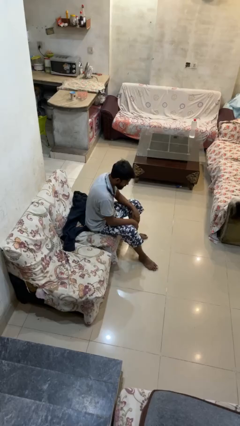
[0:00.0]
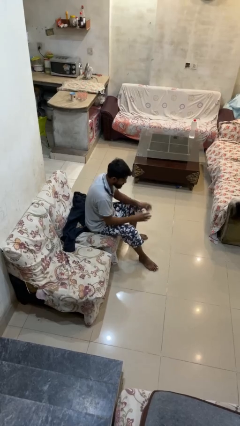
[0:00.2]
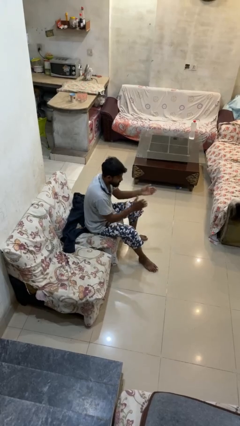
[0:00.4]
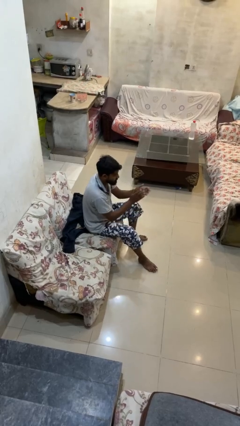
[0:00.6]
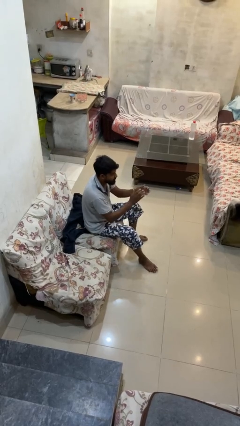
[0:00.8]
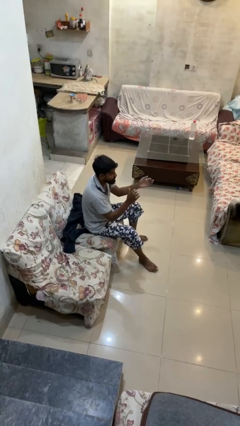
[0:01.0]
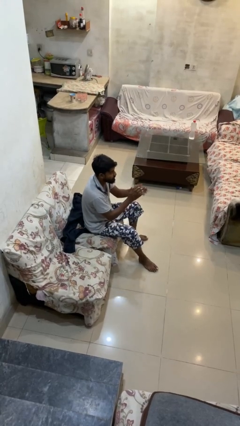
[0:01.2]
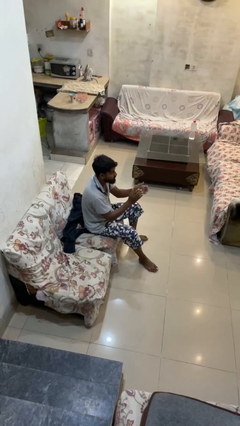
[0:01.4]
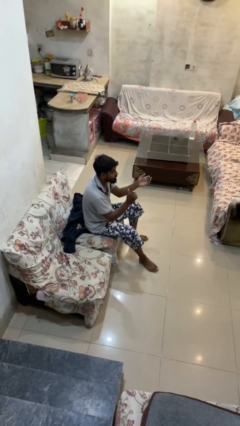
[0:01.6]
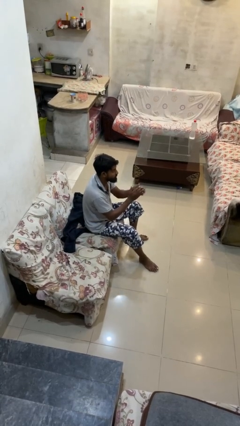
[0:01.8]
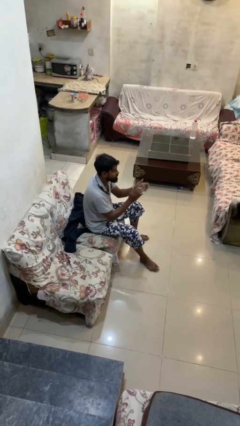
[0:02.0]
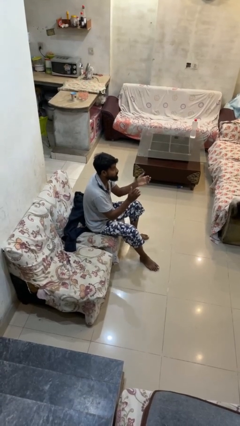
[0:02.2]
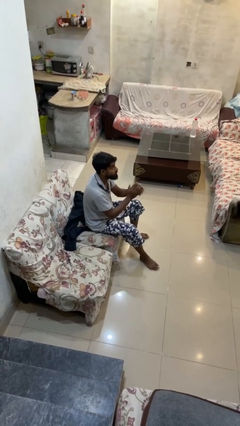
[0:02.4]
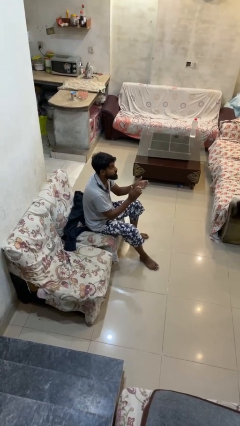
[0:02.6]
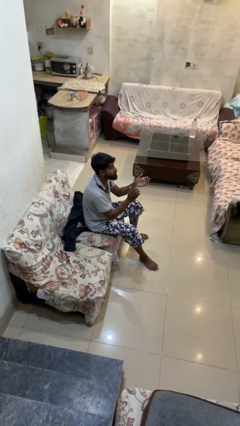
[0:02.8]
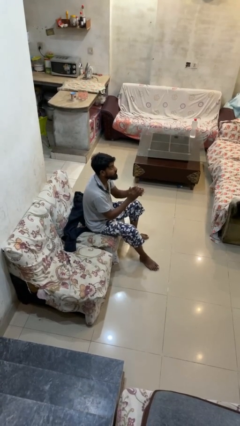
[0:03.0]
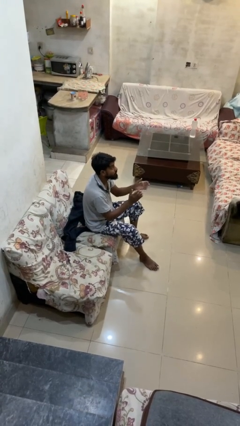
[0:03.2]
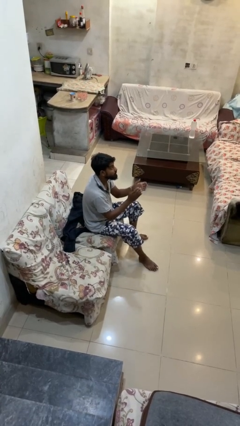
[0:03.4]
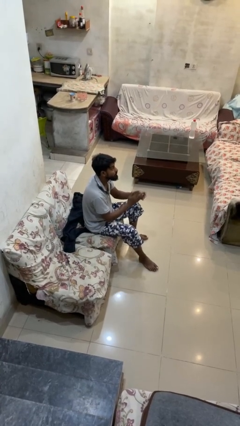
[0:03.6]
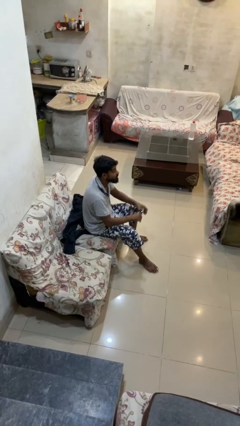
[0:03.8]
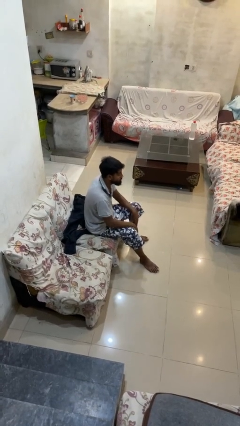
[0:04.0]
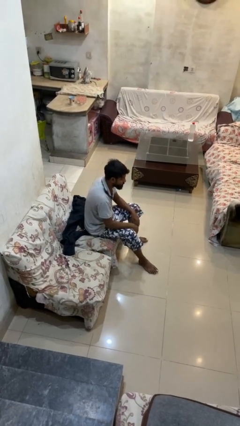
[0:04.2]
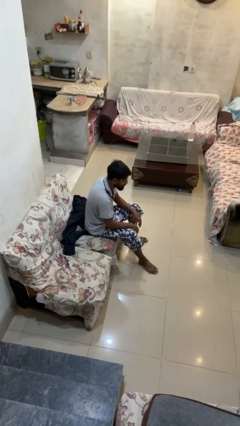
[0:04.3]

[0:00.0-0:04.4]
person claps hands

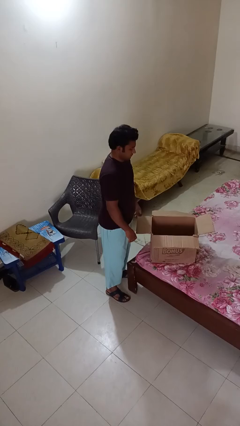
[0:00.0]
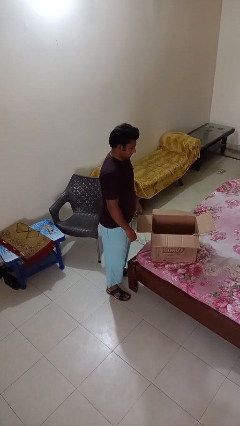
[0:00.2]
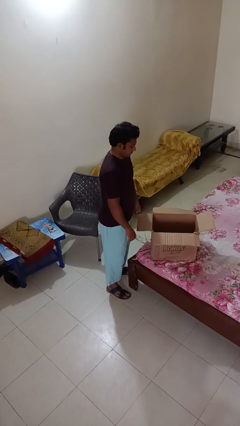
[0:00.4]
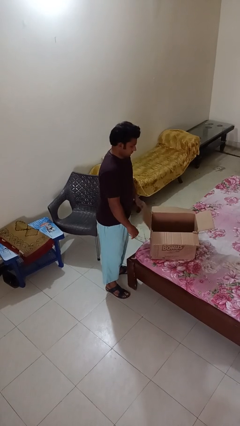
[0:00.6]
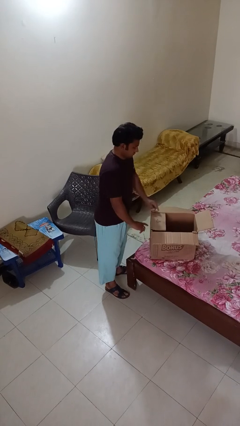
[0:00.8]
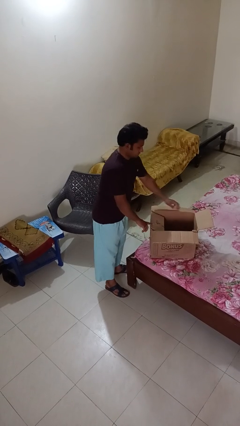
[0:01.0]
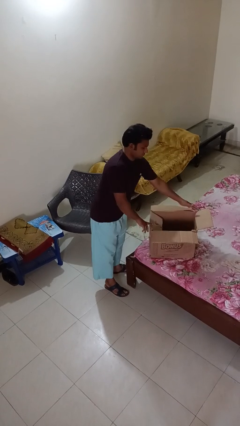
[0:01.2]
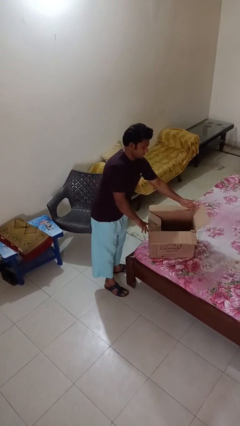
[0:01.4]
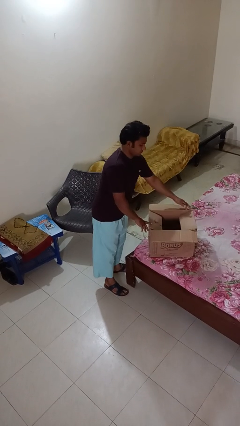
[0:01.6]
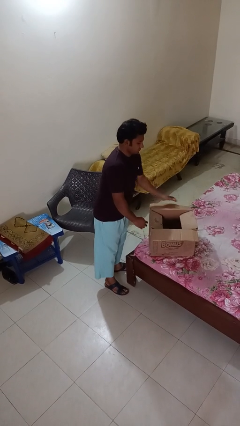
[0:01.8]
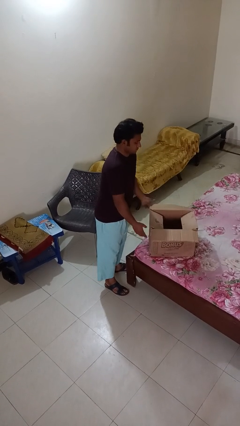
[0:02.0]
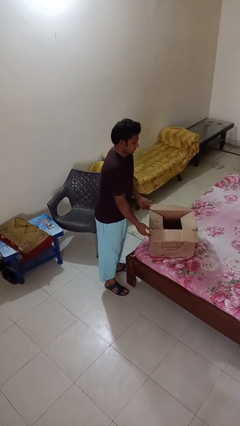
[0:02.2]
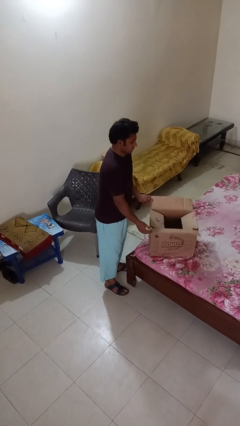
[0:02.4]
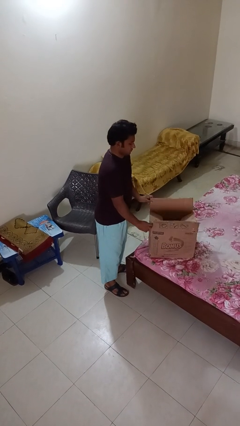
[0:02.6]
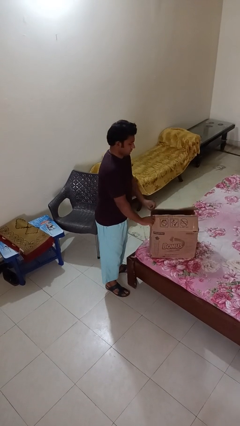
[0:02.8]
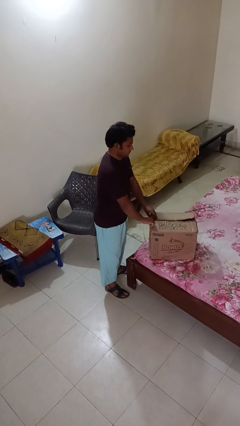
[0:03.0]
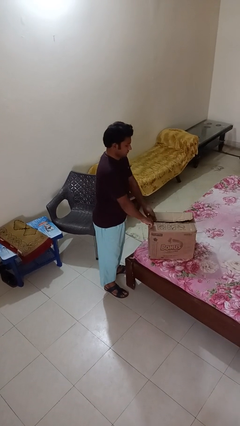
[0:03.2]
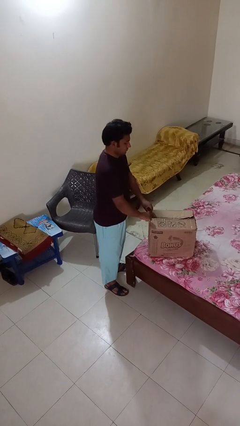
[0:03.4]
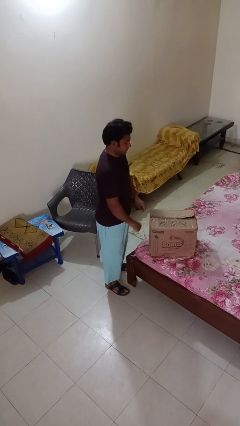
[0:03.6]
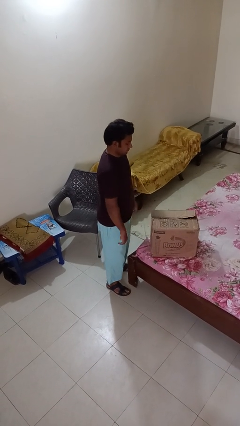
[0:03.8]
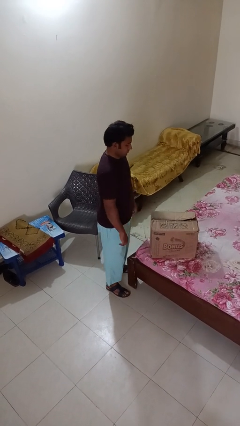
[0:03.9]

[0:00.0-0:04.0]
person closes box

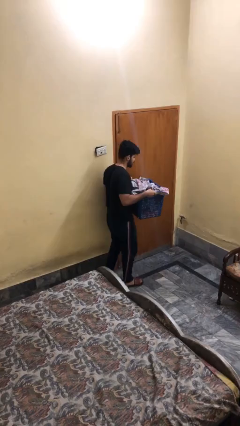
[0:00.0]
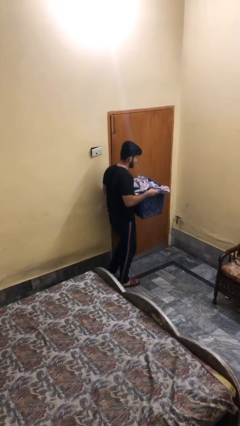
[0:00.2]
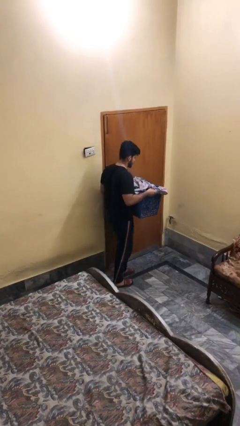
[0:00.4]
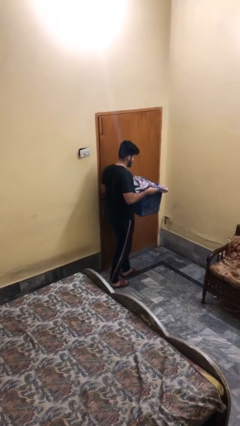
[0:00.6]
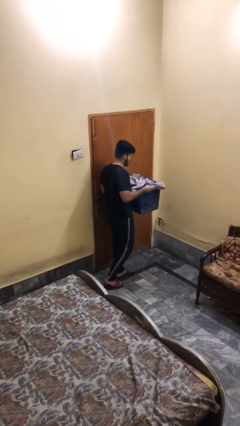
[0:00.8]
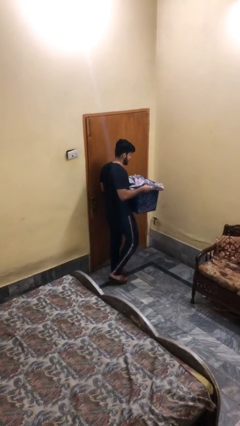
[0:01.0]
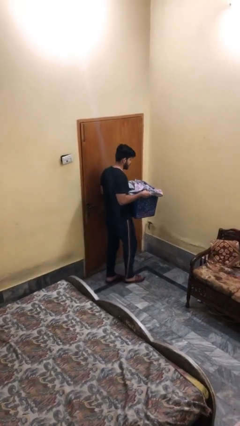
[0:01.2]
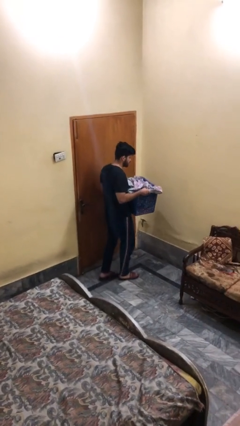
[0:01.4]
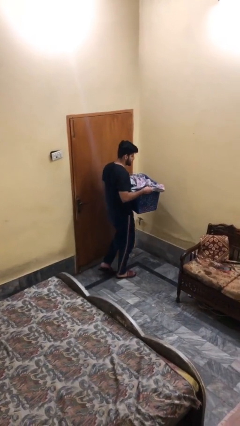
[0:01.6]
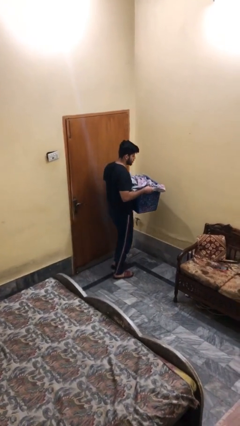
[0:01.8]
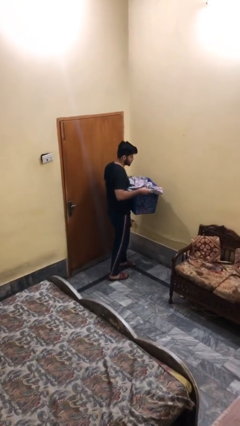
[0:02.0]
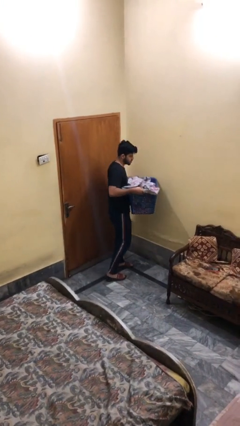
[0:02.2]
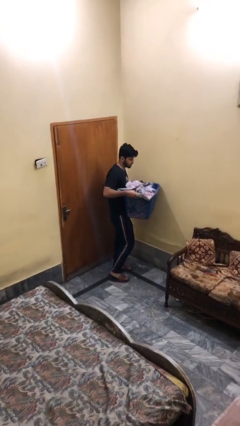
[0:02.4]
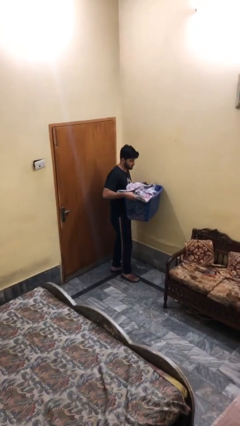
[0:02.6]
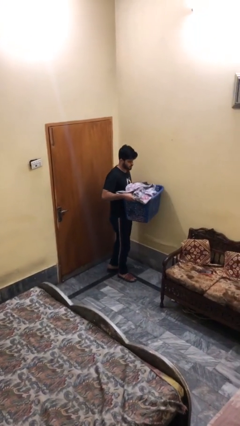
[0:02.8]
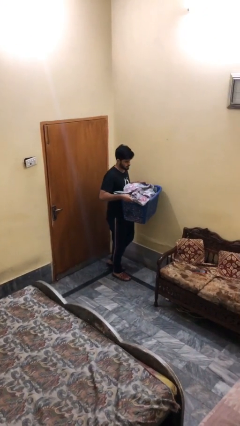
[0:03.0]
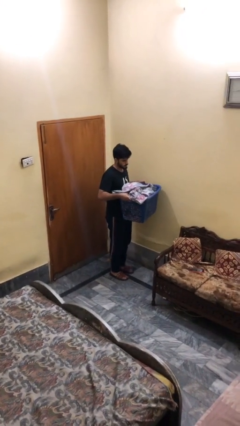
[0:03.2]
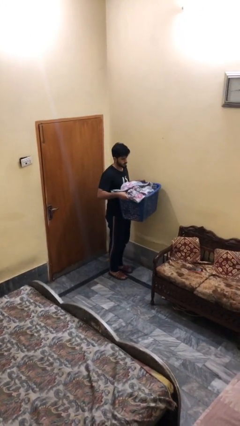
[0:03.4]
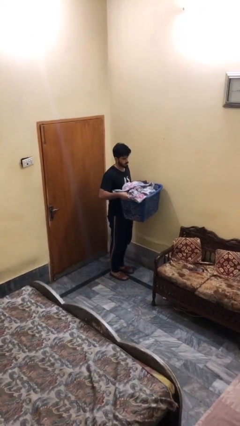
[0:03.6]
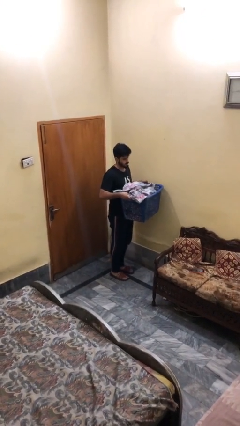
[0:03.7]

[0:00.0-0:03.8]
person carries laundry basket

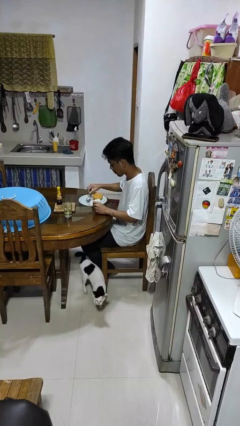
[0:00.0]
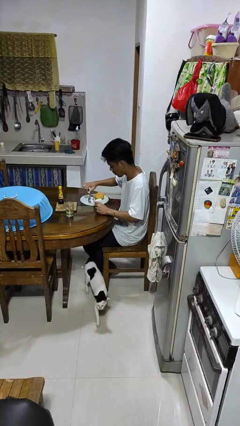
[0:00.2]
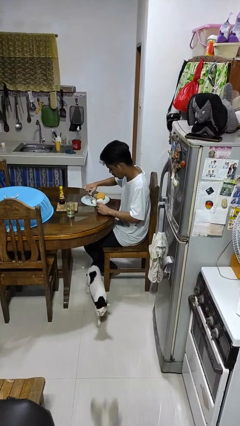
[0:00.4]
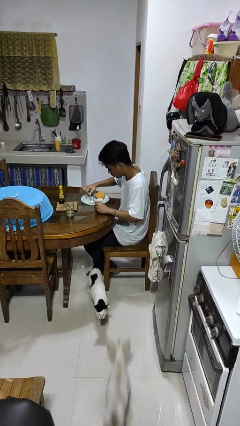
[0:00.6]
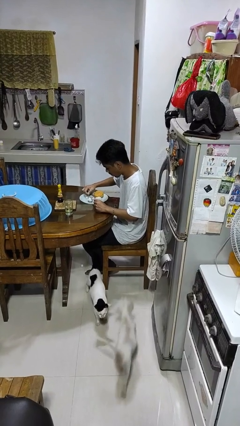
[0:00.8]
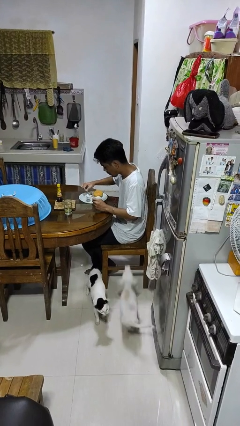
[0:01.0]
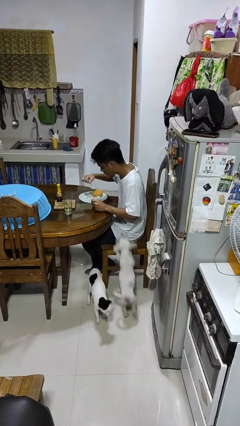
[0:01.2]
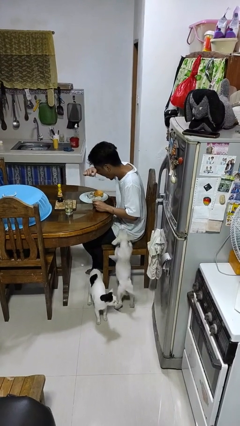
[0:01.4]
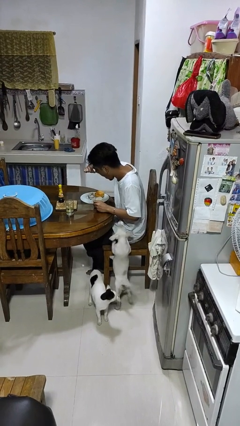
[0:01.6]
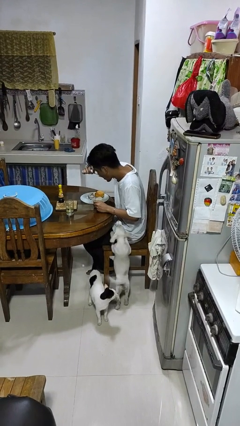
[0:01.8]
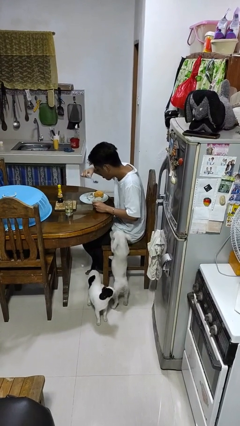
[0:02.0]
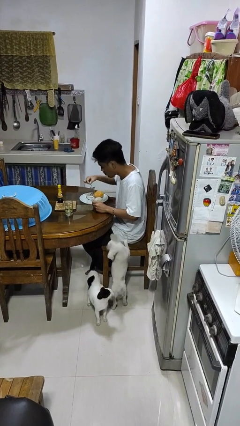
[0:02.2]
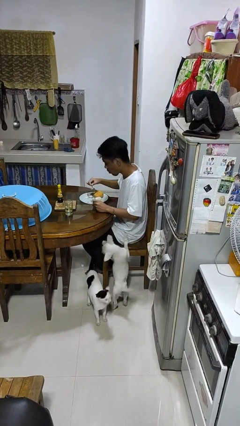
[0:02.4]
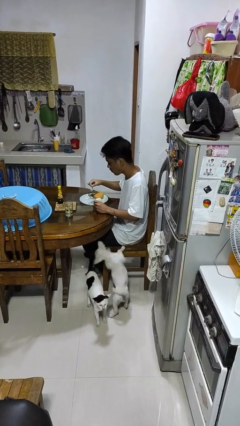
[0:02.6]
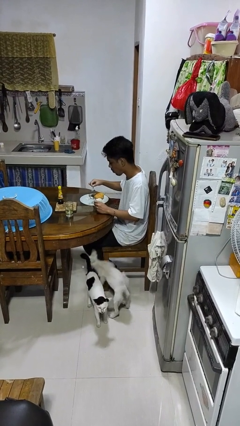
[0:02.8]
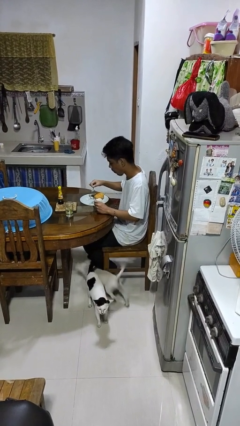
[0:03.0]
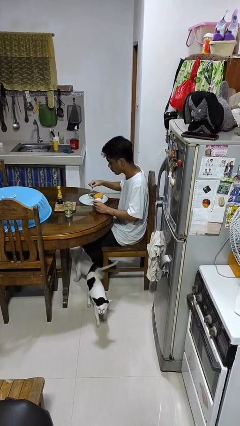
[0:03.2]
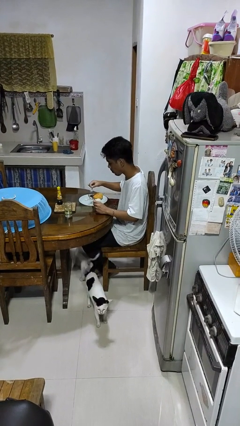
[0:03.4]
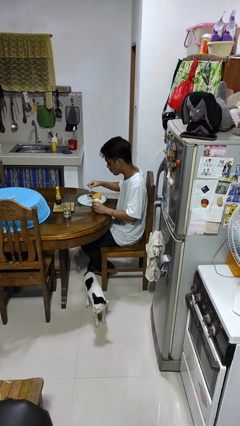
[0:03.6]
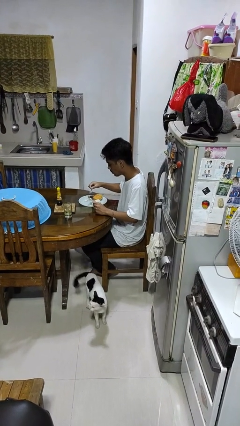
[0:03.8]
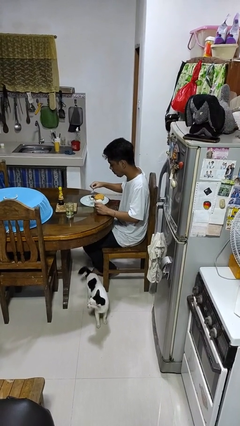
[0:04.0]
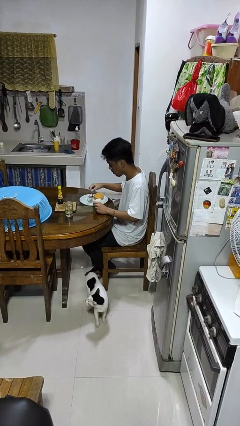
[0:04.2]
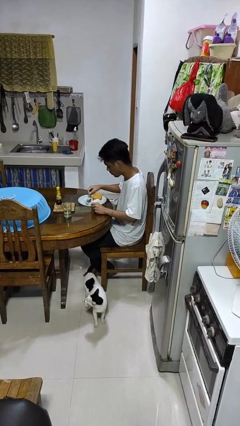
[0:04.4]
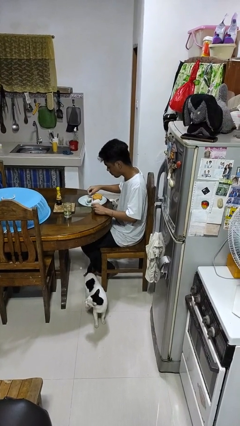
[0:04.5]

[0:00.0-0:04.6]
person eats with utensil

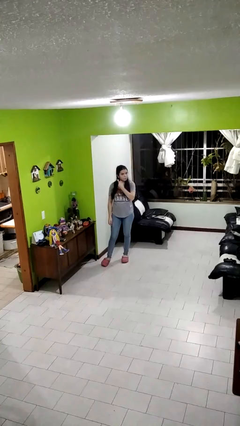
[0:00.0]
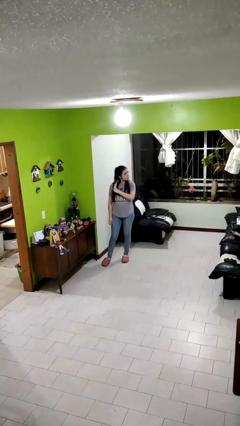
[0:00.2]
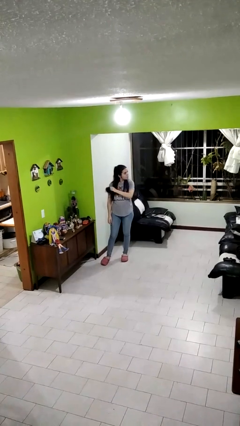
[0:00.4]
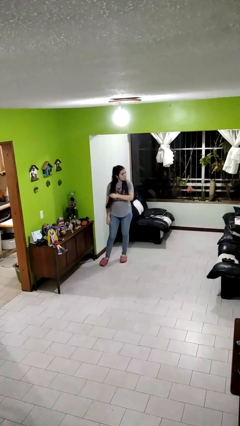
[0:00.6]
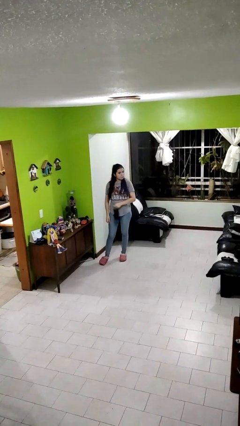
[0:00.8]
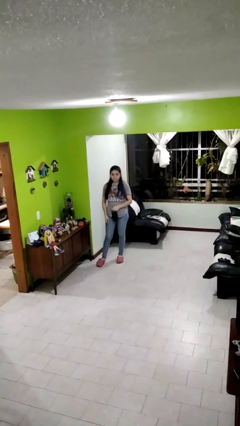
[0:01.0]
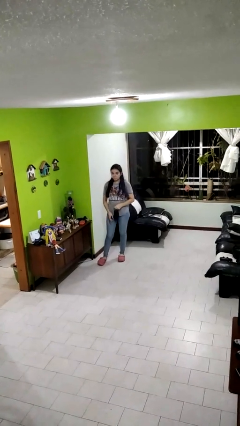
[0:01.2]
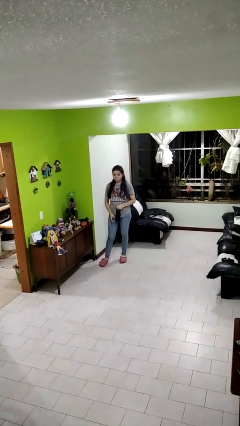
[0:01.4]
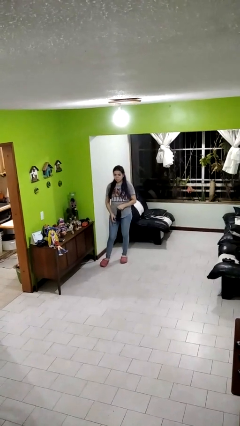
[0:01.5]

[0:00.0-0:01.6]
person takes off facemask
